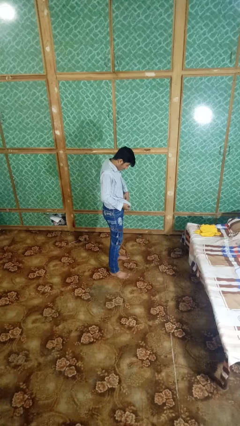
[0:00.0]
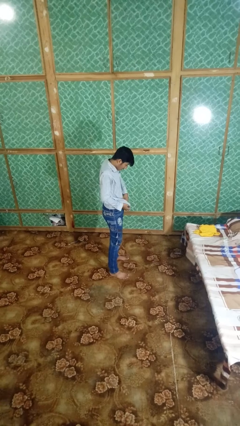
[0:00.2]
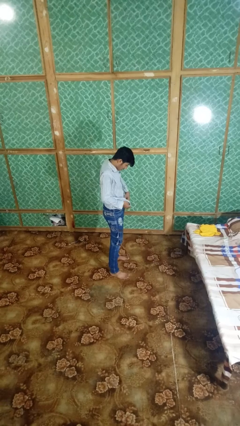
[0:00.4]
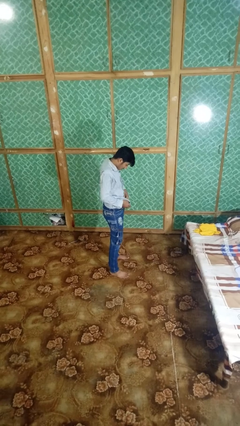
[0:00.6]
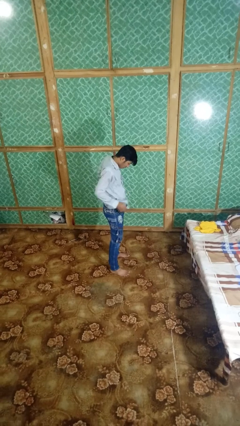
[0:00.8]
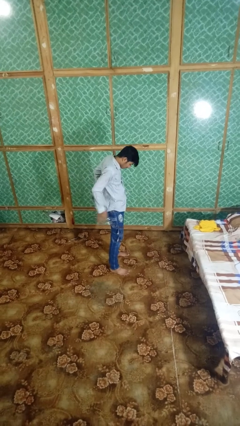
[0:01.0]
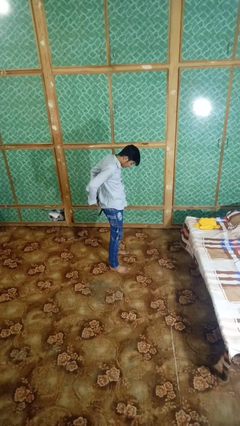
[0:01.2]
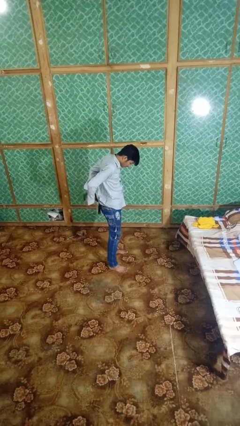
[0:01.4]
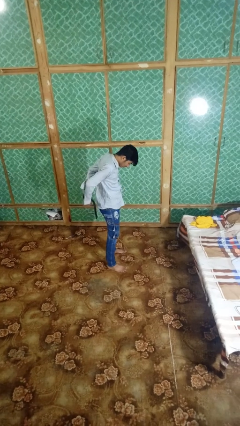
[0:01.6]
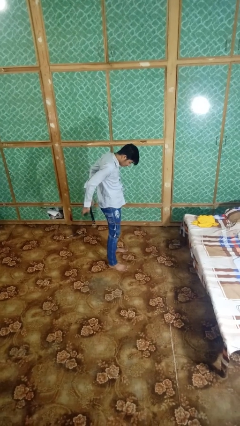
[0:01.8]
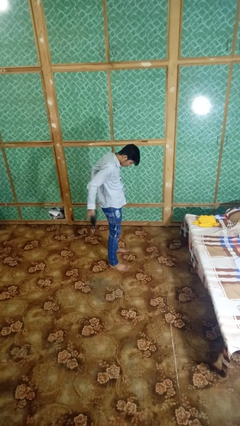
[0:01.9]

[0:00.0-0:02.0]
person takes off belt

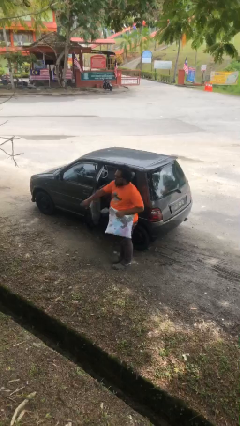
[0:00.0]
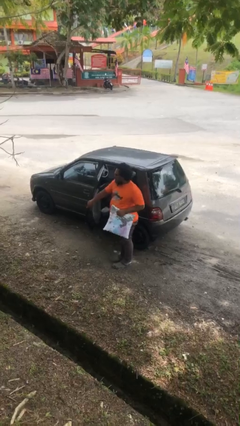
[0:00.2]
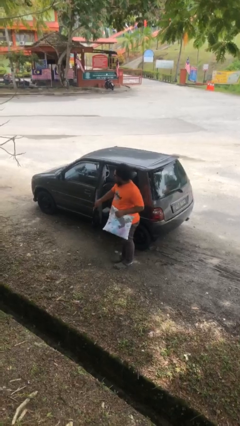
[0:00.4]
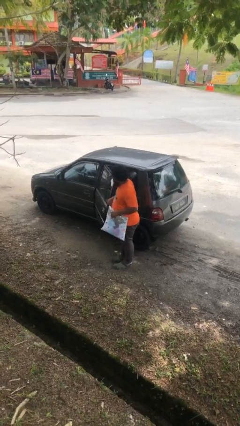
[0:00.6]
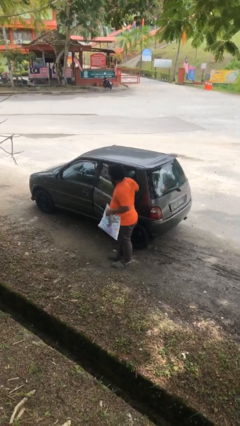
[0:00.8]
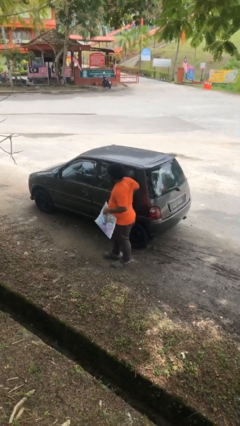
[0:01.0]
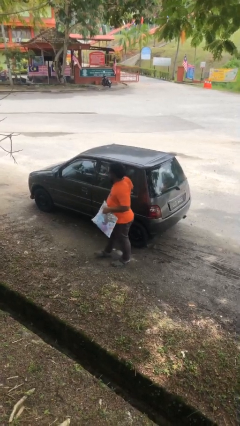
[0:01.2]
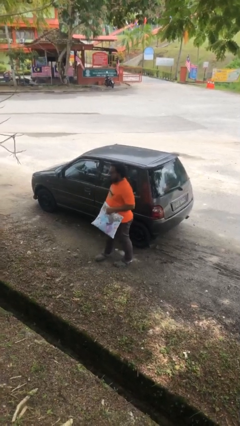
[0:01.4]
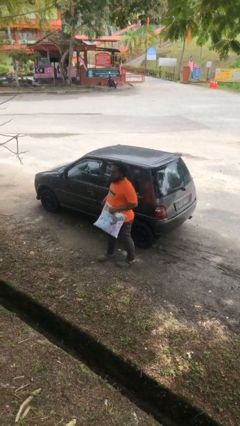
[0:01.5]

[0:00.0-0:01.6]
person closes car door

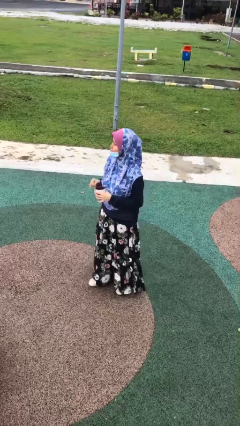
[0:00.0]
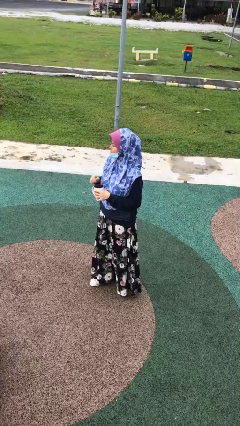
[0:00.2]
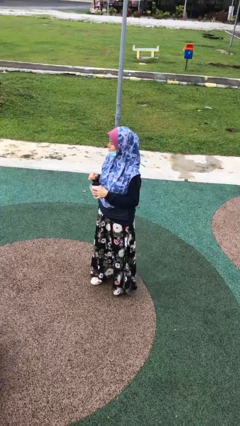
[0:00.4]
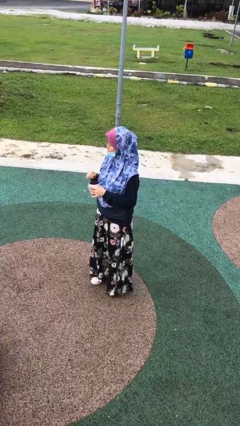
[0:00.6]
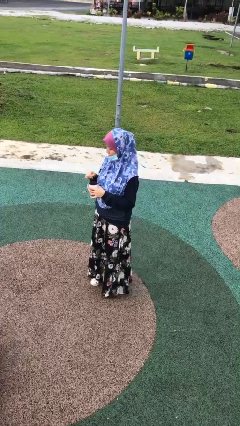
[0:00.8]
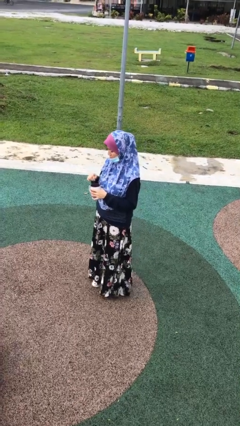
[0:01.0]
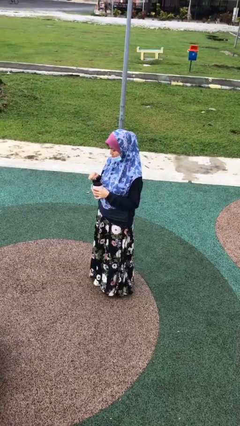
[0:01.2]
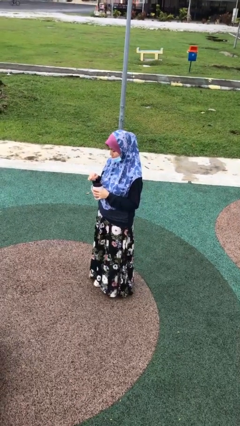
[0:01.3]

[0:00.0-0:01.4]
person stirs mug

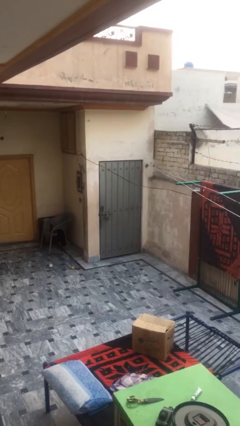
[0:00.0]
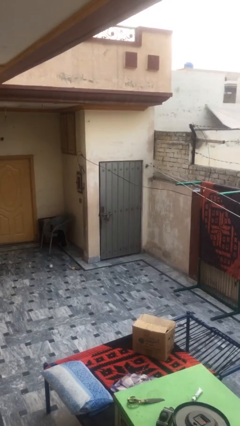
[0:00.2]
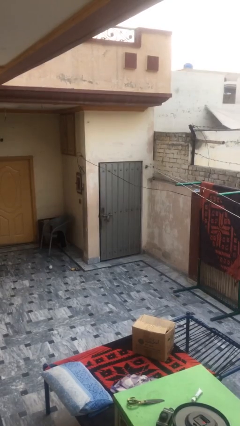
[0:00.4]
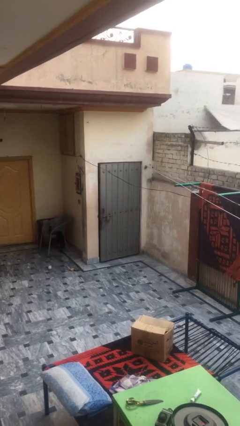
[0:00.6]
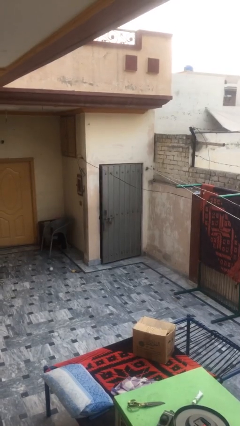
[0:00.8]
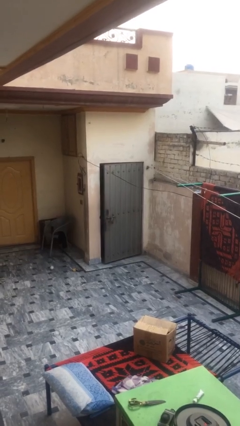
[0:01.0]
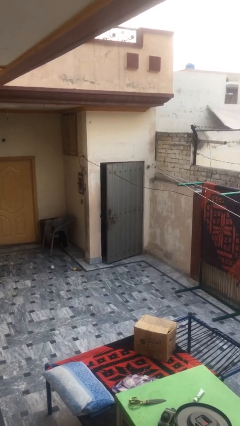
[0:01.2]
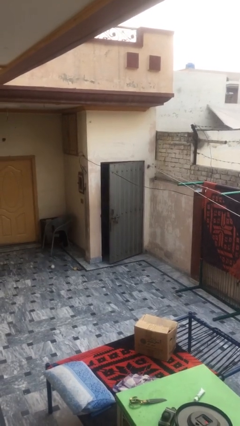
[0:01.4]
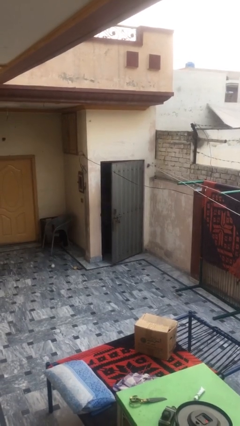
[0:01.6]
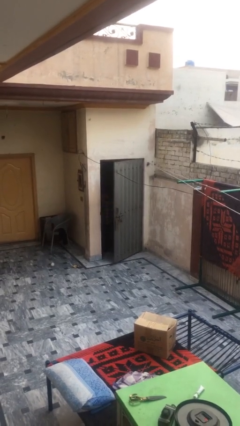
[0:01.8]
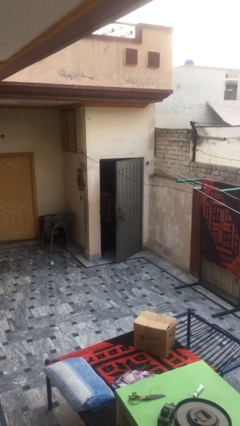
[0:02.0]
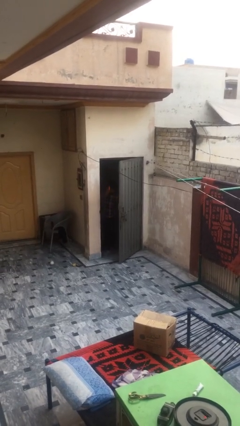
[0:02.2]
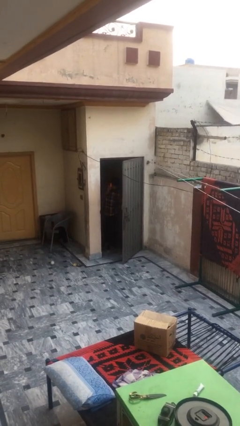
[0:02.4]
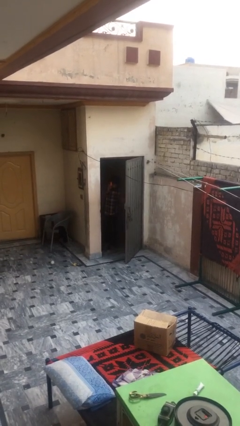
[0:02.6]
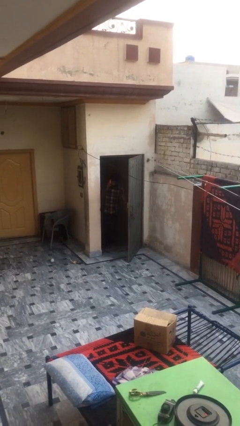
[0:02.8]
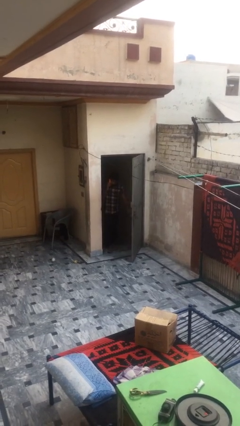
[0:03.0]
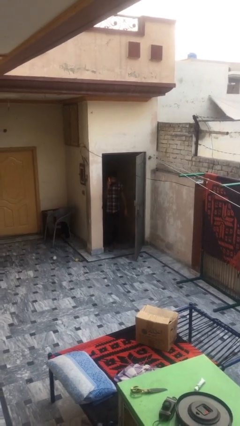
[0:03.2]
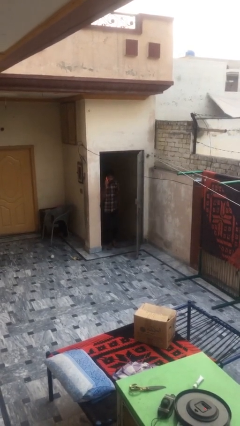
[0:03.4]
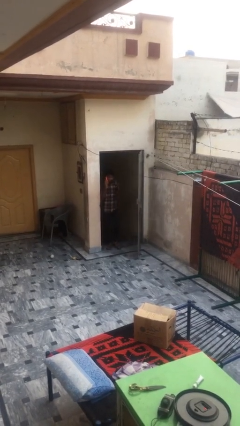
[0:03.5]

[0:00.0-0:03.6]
person opens facility door

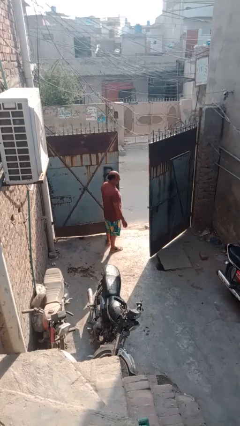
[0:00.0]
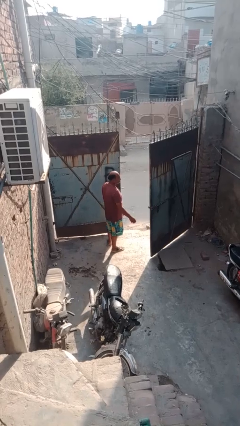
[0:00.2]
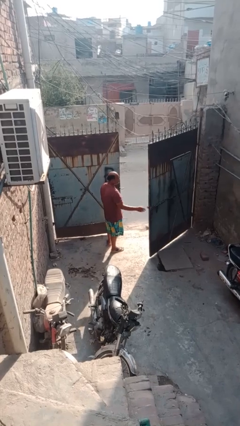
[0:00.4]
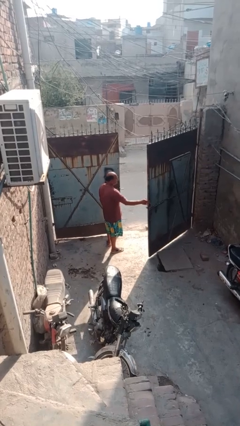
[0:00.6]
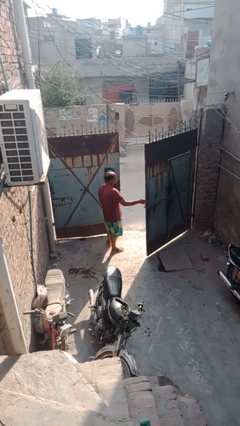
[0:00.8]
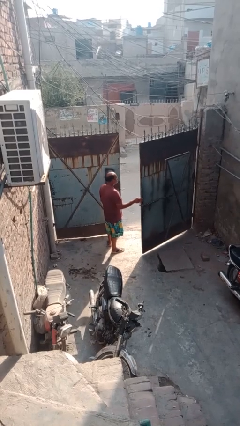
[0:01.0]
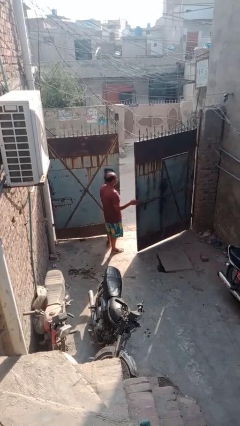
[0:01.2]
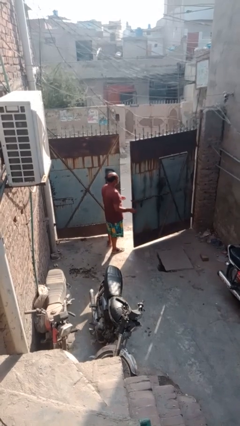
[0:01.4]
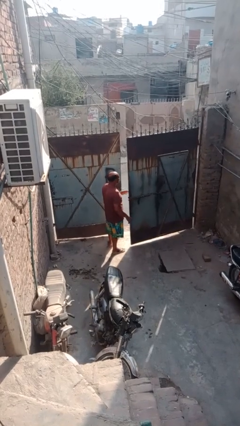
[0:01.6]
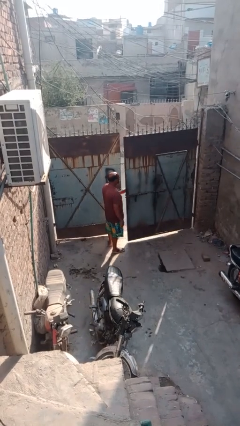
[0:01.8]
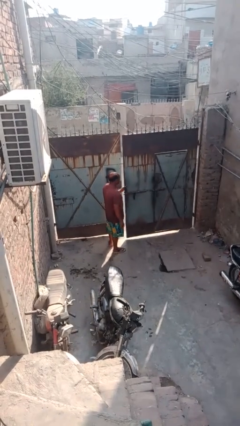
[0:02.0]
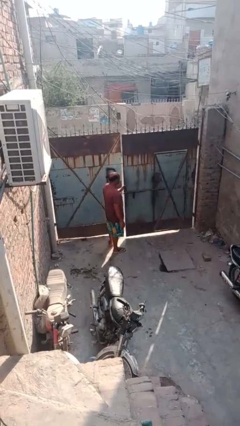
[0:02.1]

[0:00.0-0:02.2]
person closes gate

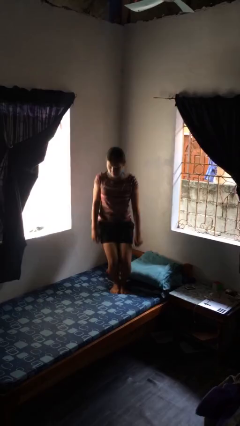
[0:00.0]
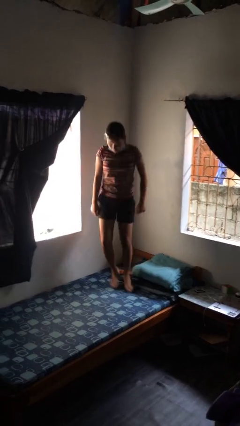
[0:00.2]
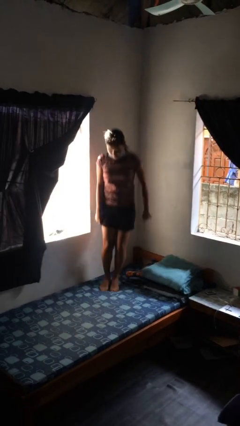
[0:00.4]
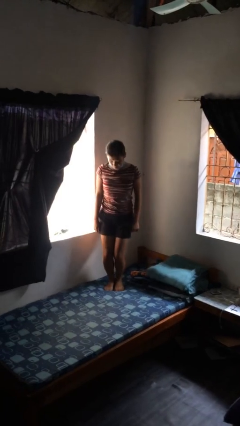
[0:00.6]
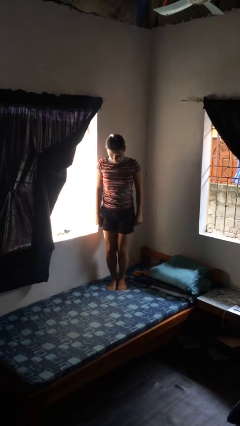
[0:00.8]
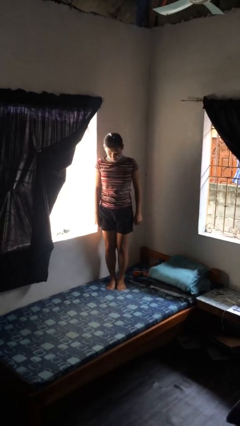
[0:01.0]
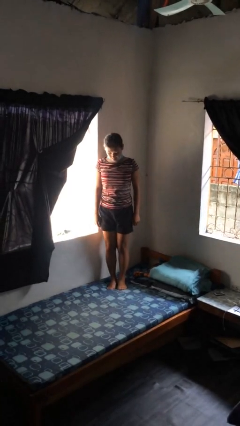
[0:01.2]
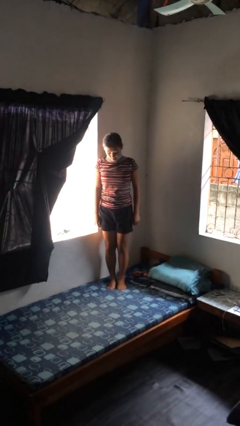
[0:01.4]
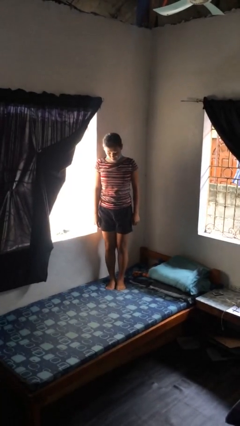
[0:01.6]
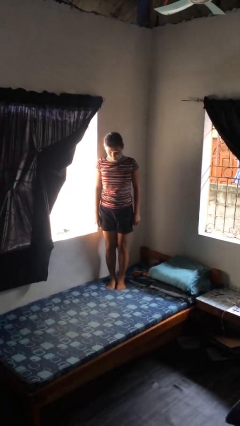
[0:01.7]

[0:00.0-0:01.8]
person jumps on bed

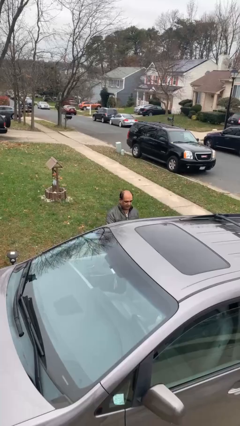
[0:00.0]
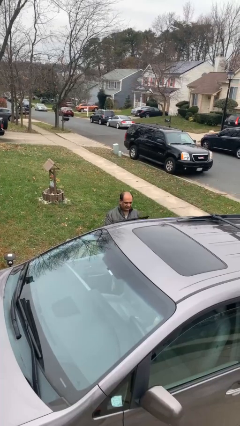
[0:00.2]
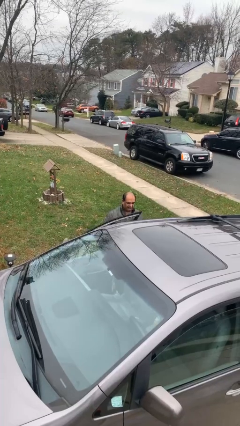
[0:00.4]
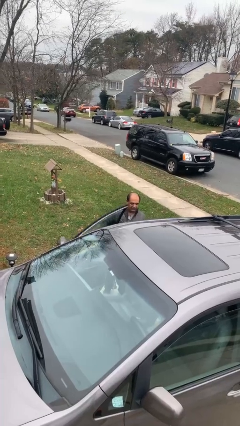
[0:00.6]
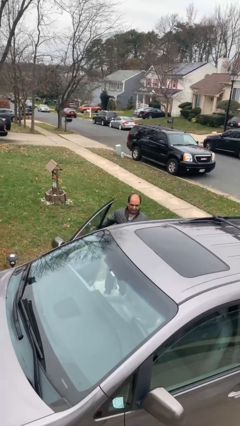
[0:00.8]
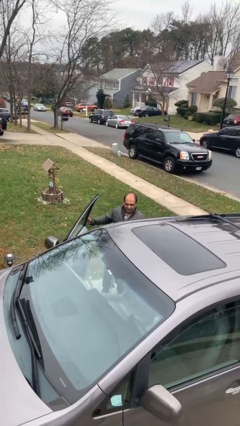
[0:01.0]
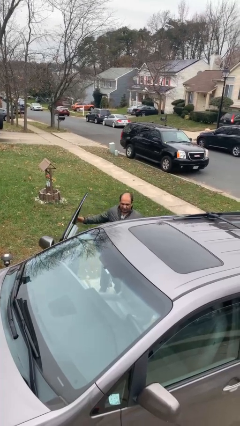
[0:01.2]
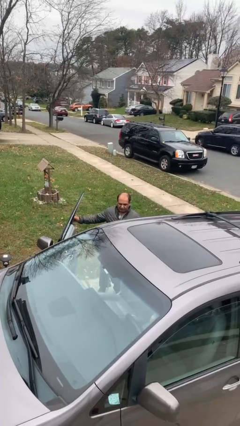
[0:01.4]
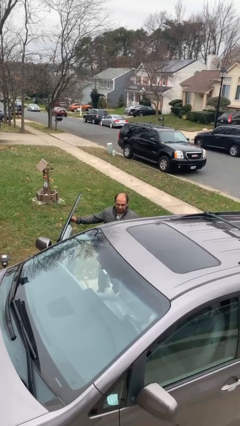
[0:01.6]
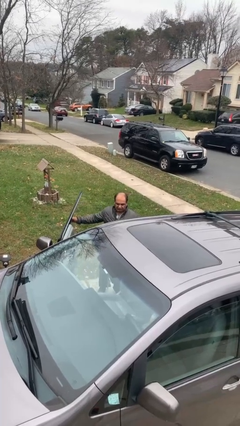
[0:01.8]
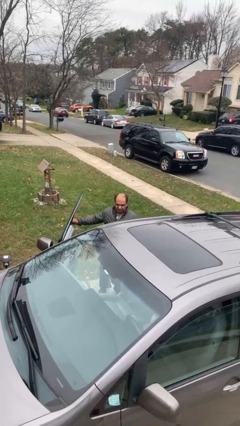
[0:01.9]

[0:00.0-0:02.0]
person opens car door

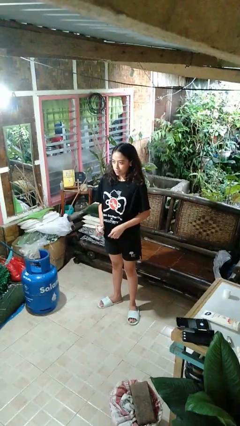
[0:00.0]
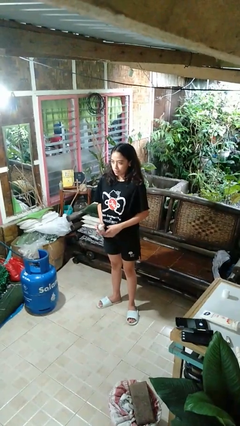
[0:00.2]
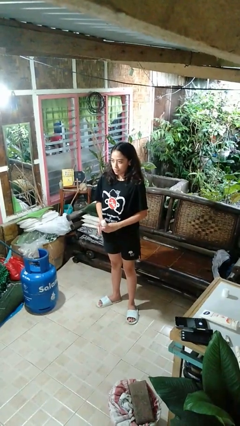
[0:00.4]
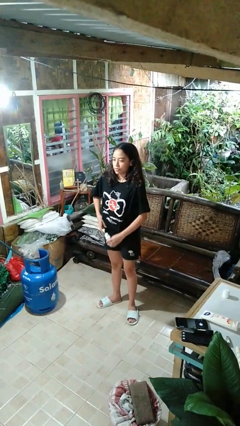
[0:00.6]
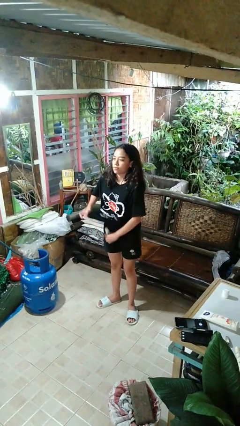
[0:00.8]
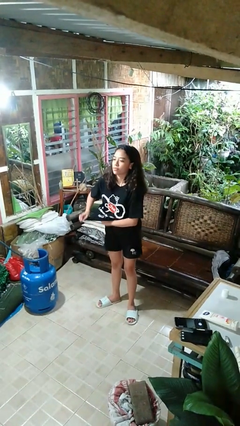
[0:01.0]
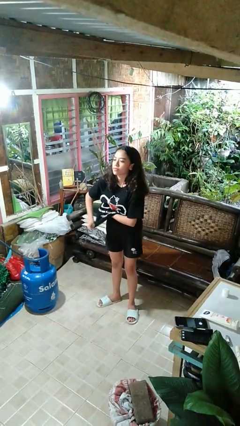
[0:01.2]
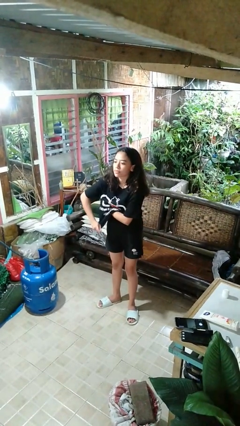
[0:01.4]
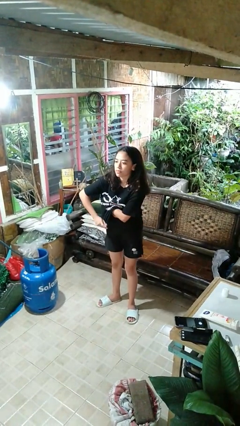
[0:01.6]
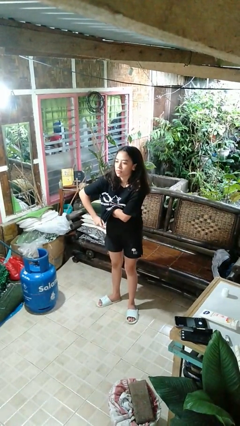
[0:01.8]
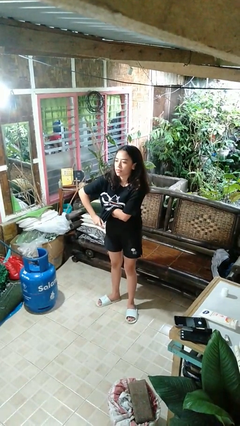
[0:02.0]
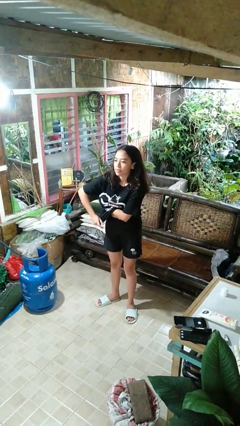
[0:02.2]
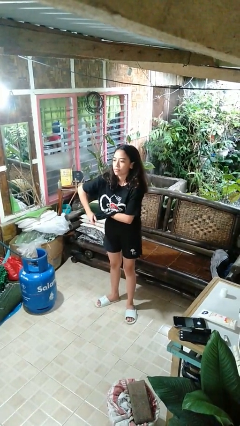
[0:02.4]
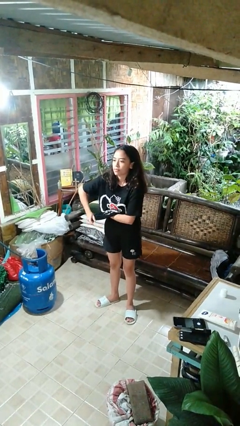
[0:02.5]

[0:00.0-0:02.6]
person applies deodorant

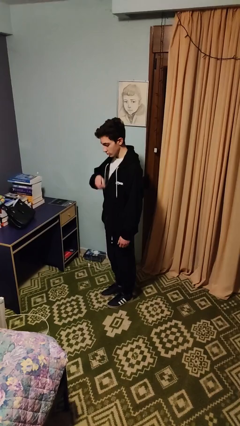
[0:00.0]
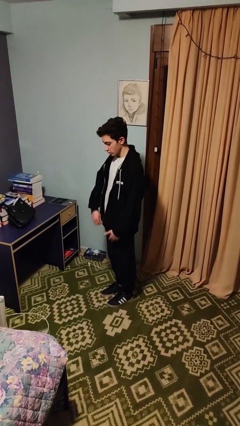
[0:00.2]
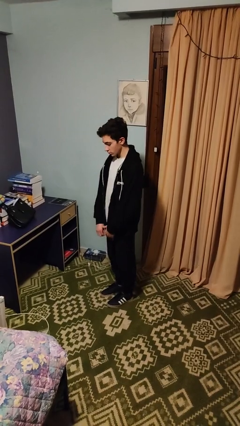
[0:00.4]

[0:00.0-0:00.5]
person unzips jacket
